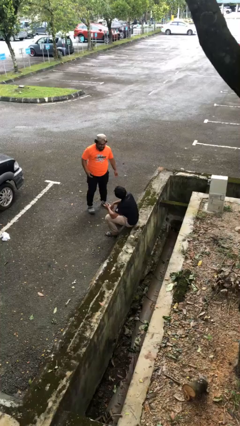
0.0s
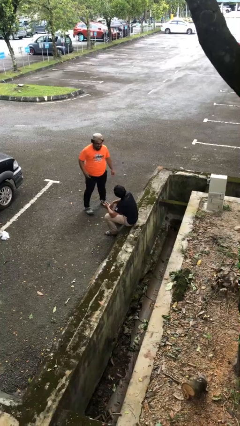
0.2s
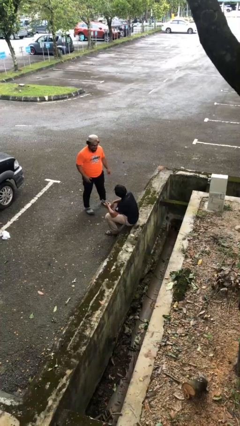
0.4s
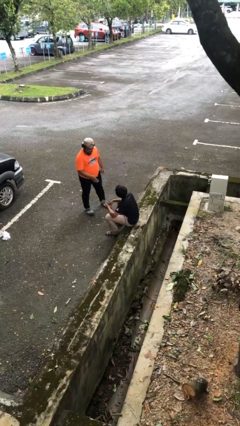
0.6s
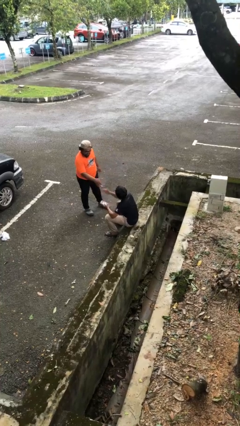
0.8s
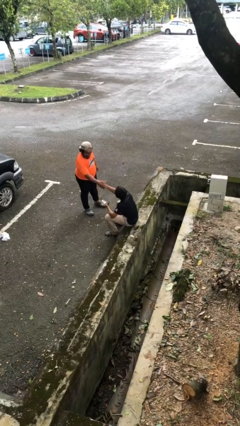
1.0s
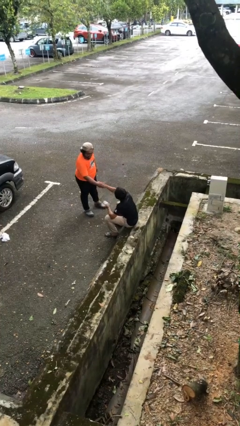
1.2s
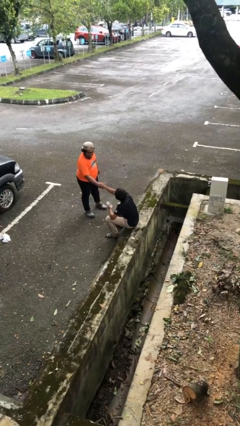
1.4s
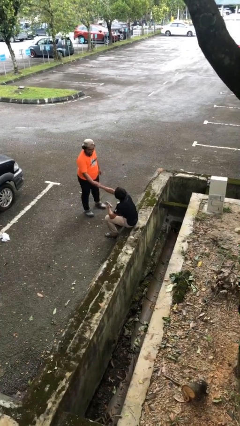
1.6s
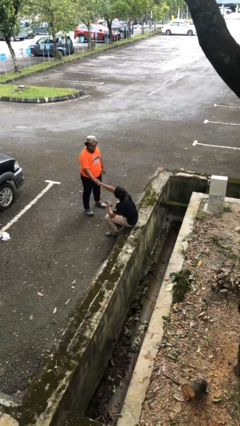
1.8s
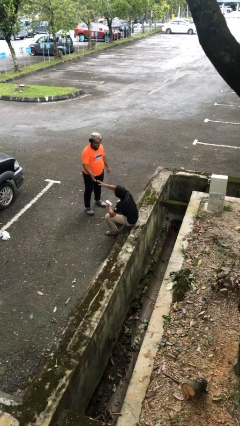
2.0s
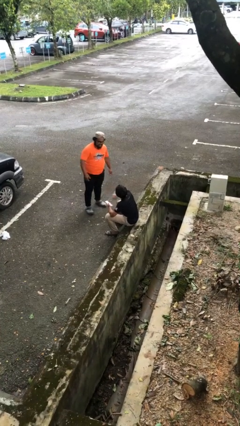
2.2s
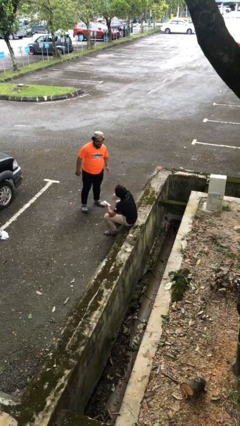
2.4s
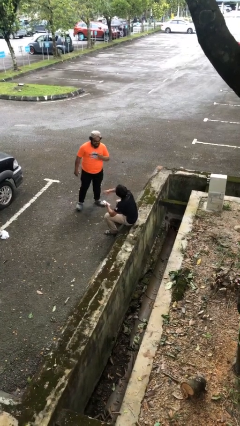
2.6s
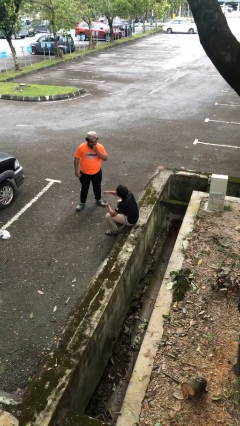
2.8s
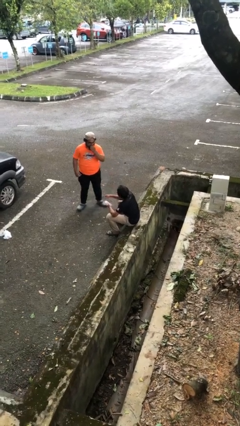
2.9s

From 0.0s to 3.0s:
person shakes hand

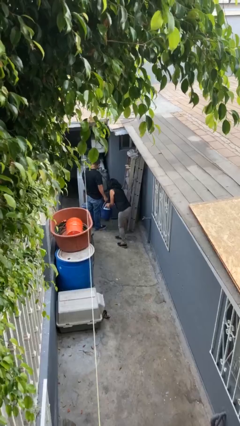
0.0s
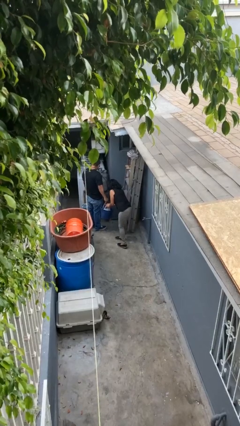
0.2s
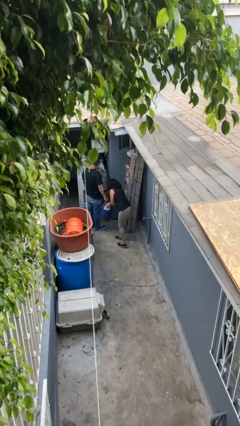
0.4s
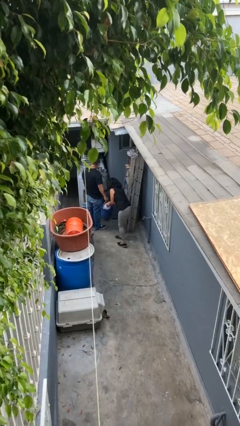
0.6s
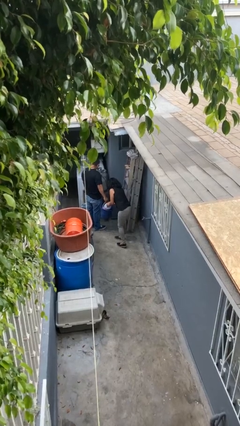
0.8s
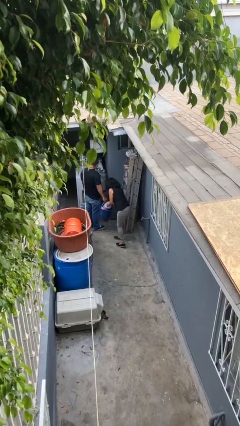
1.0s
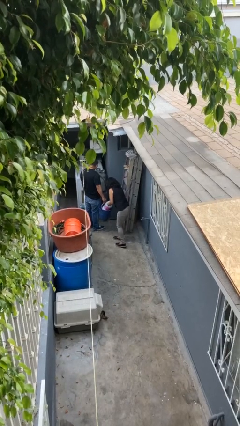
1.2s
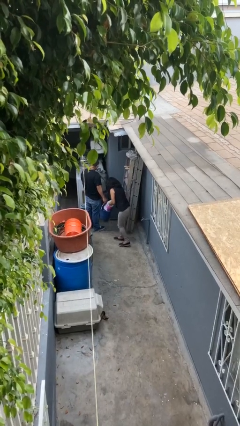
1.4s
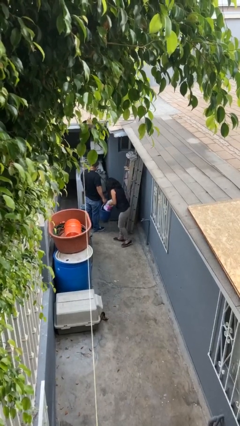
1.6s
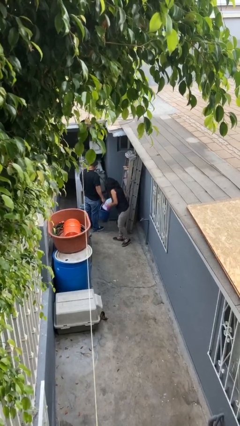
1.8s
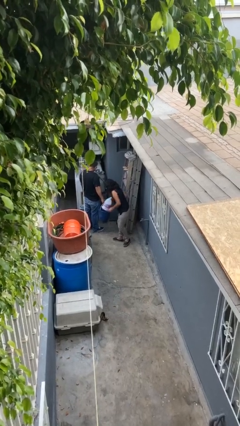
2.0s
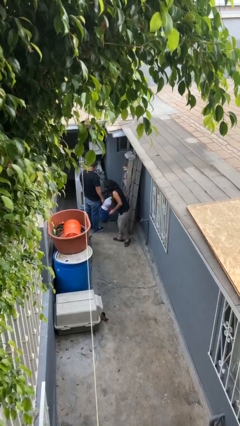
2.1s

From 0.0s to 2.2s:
person steals object from person

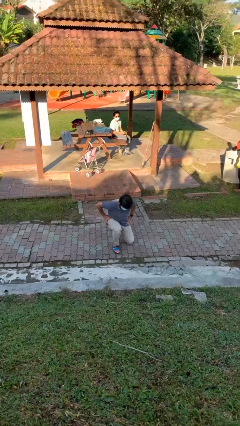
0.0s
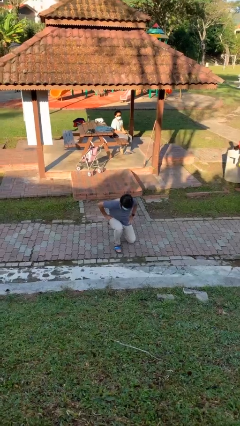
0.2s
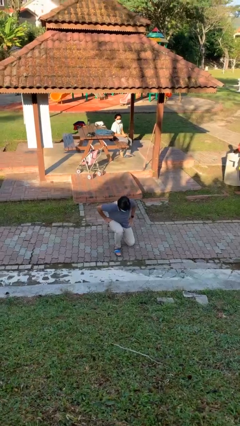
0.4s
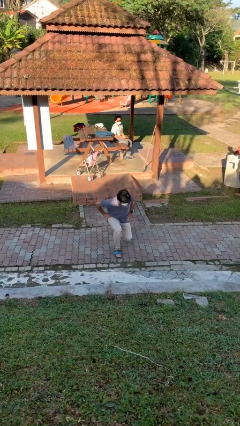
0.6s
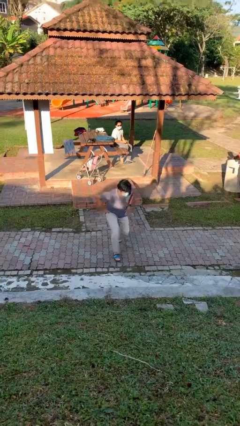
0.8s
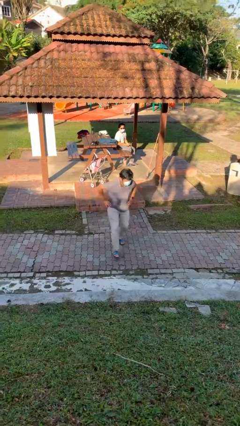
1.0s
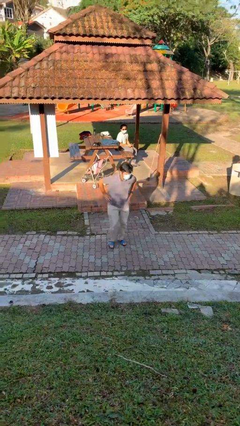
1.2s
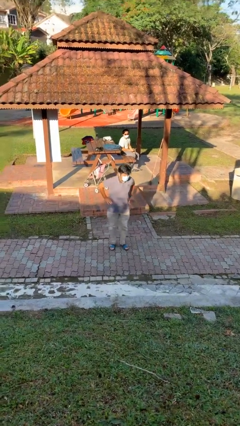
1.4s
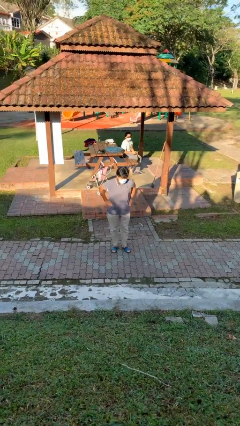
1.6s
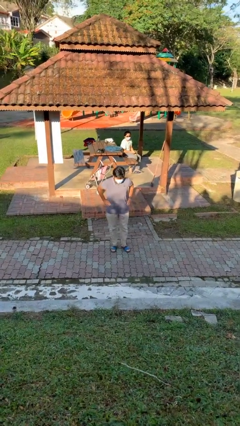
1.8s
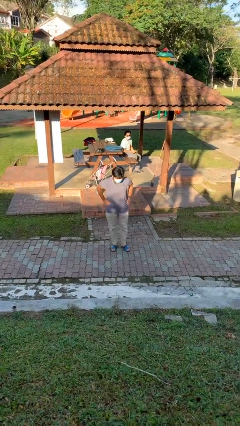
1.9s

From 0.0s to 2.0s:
person stands up from floor

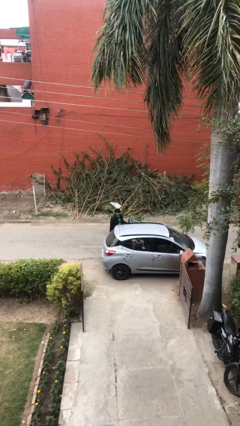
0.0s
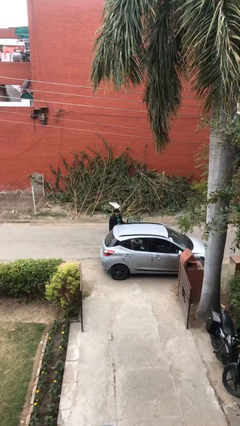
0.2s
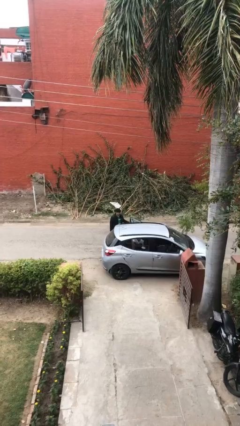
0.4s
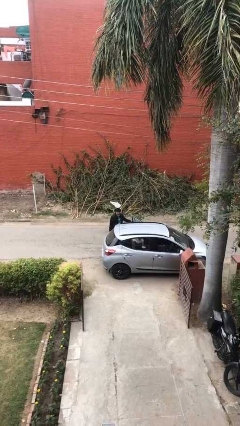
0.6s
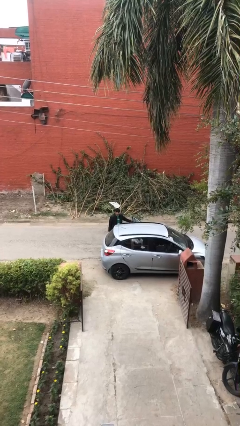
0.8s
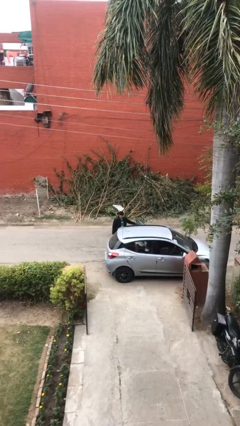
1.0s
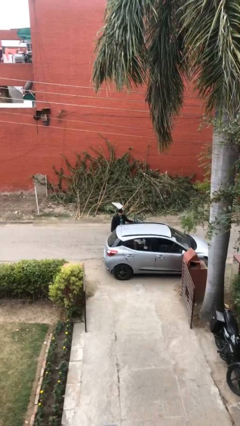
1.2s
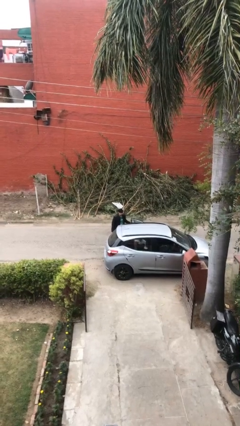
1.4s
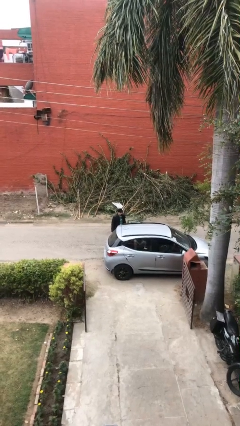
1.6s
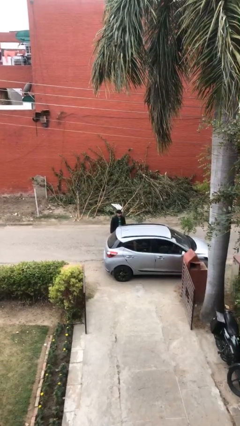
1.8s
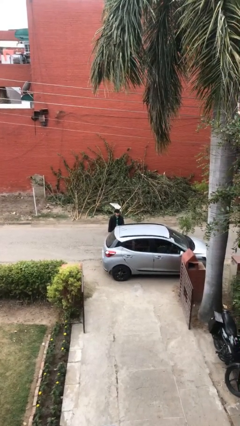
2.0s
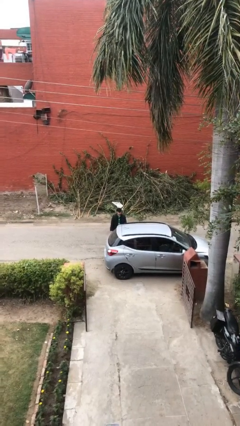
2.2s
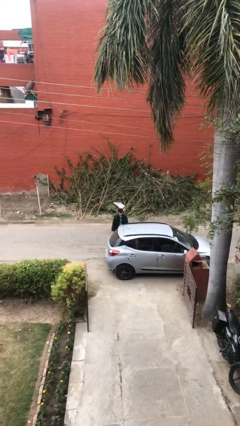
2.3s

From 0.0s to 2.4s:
person closes car door

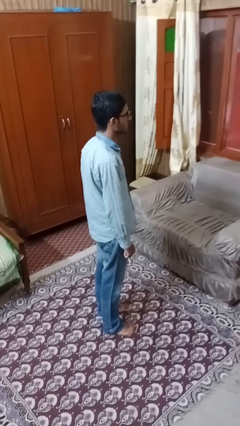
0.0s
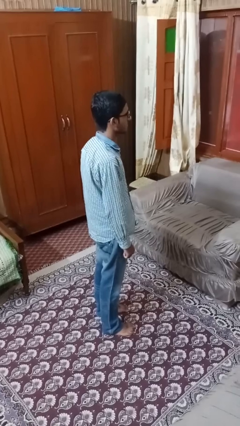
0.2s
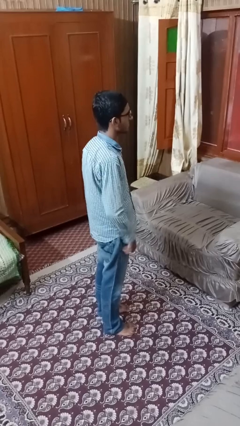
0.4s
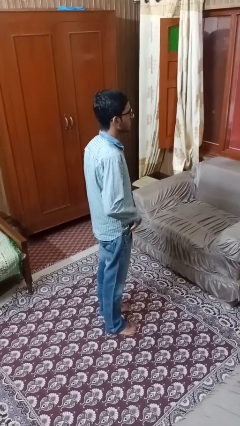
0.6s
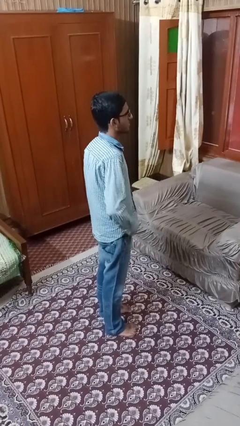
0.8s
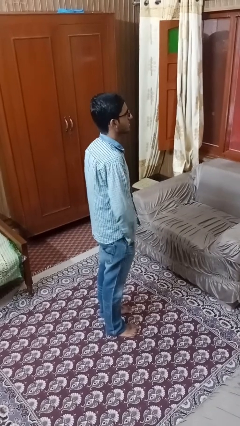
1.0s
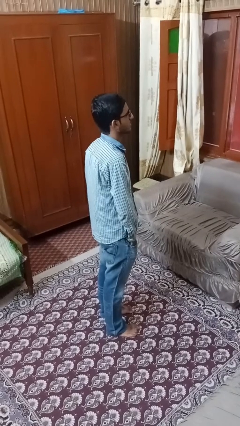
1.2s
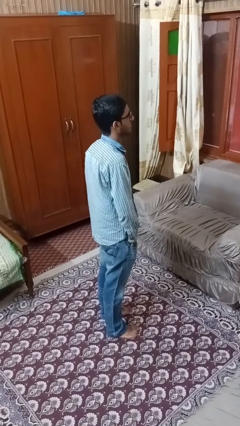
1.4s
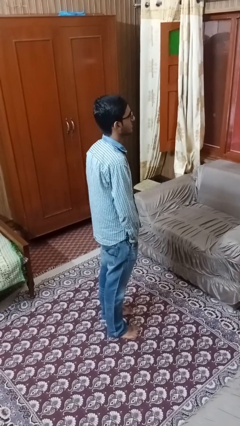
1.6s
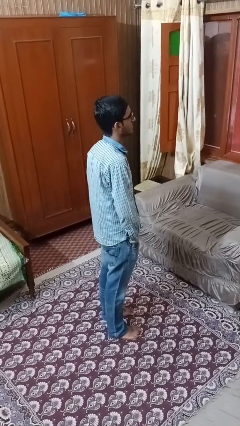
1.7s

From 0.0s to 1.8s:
person puts hands in back pockets

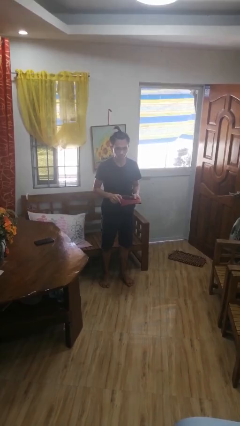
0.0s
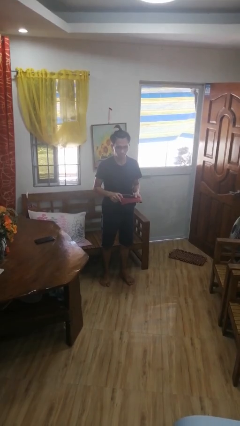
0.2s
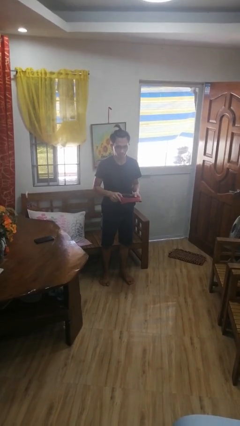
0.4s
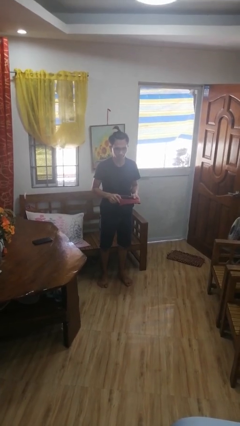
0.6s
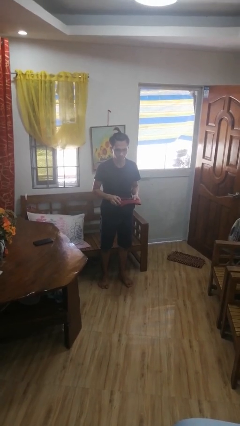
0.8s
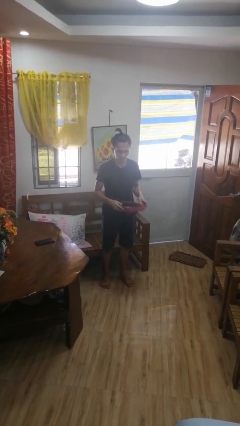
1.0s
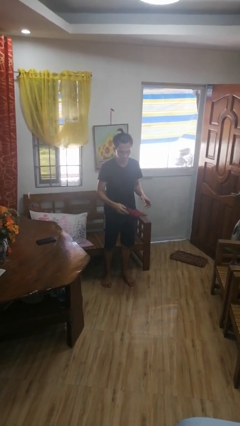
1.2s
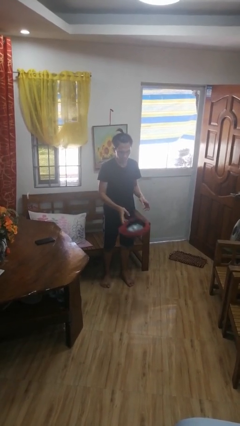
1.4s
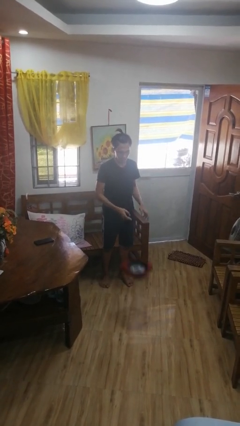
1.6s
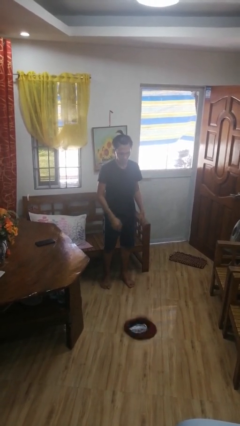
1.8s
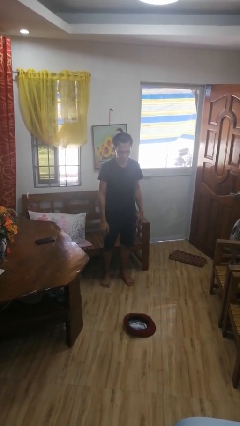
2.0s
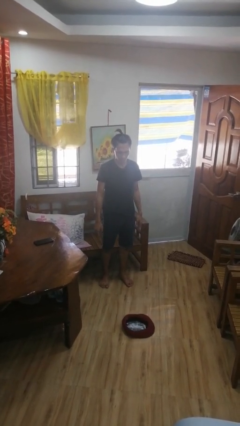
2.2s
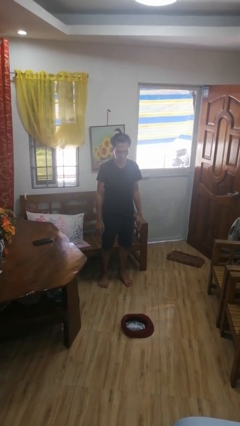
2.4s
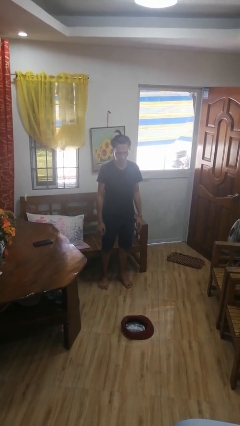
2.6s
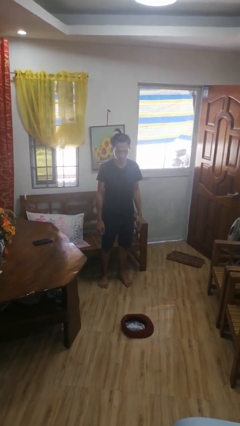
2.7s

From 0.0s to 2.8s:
person throws object to ground

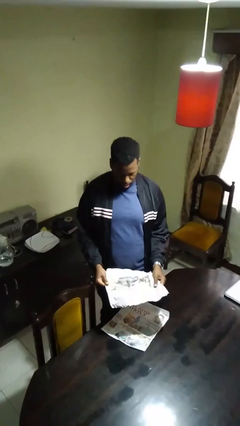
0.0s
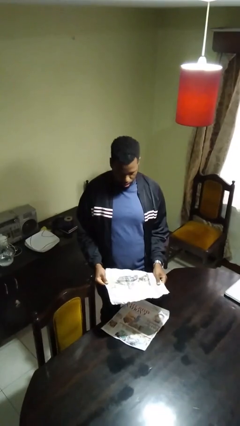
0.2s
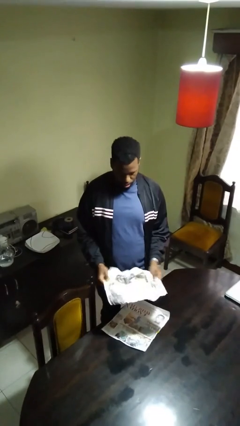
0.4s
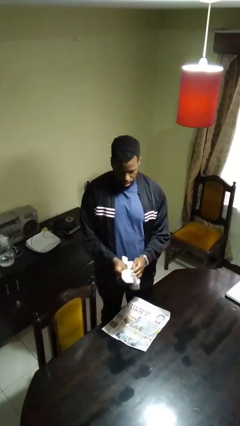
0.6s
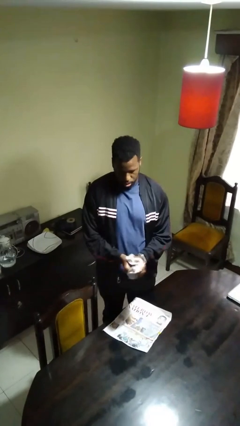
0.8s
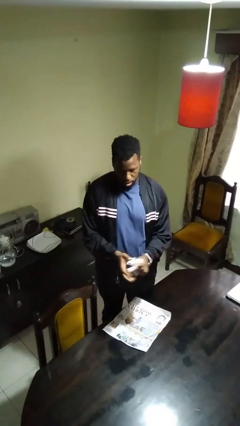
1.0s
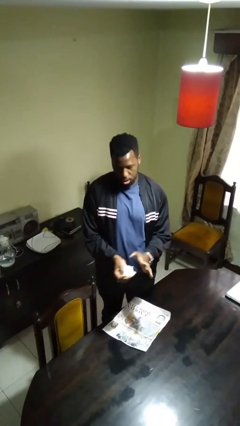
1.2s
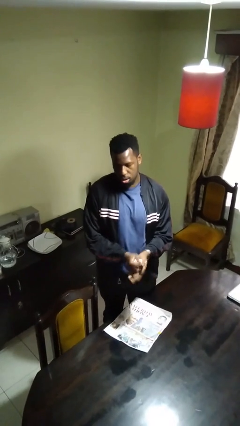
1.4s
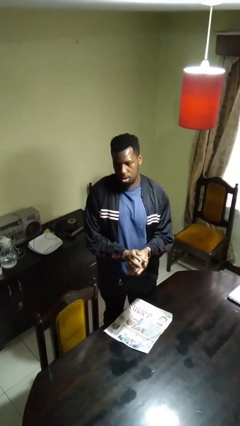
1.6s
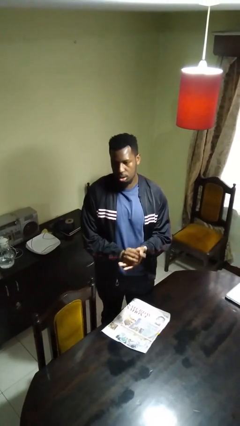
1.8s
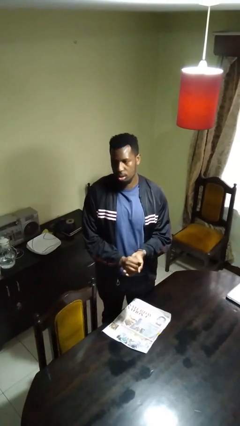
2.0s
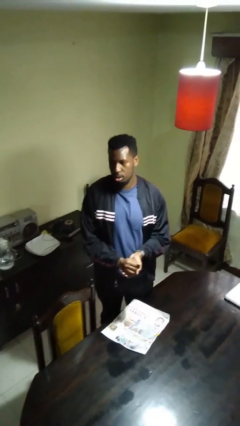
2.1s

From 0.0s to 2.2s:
person crumples paper

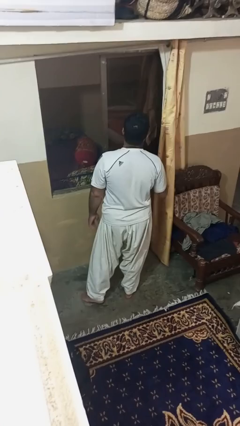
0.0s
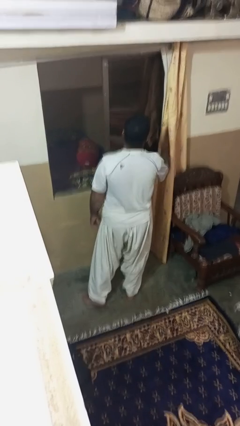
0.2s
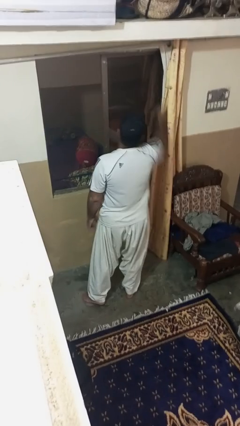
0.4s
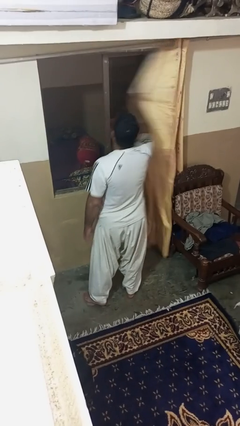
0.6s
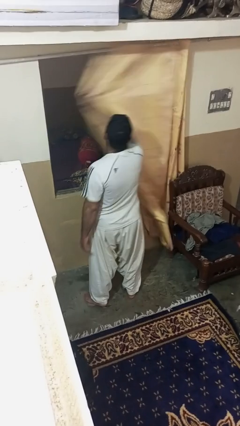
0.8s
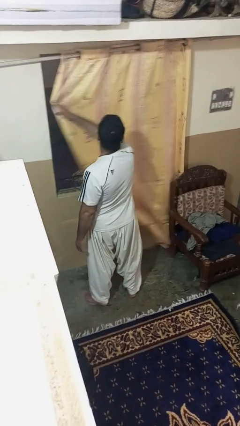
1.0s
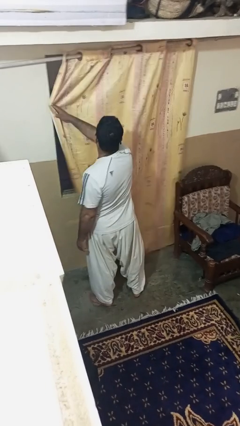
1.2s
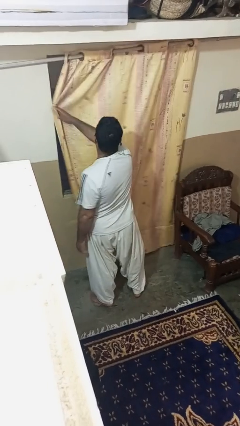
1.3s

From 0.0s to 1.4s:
person closes curtains
